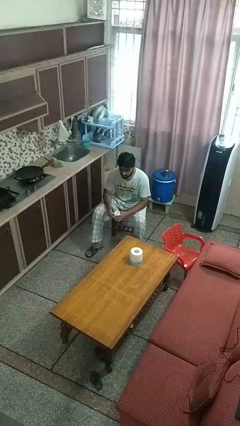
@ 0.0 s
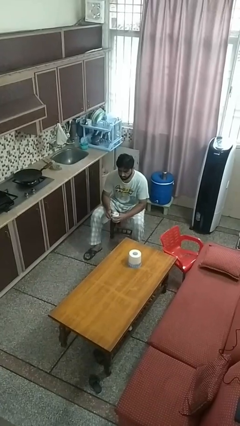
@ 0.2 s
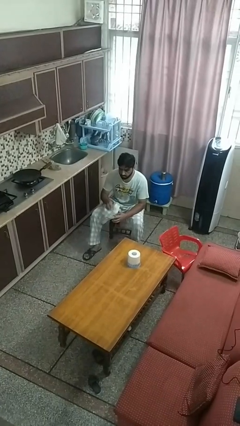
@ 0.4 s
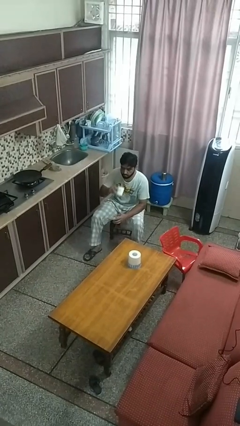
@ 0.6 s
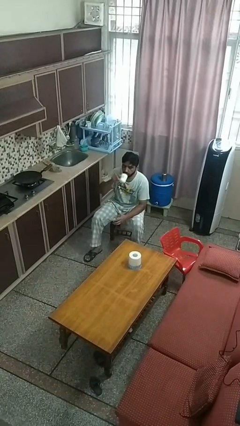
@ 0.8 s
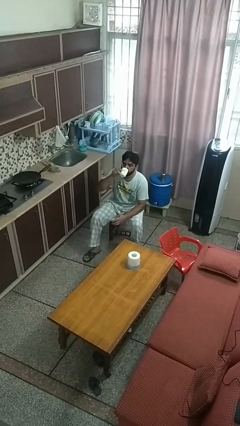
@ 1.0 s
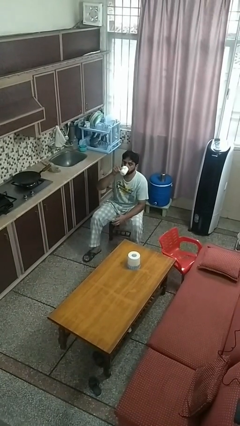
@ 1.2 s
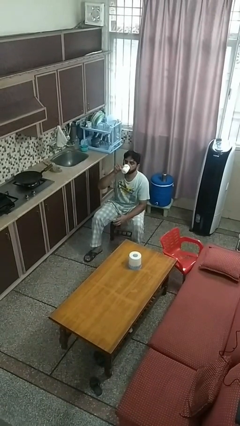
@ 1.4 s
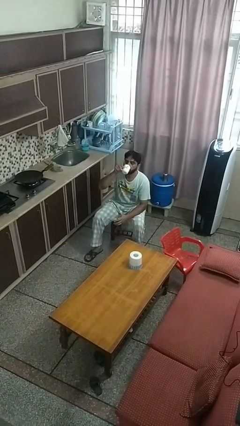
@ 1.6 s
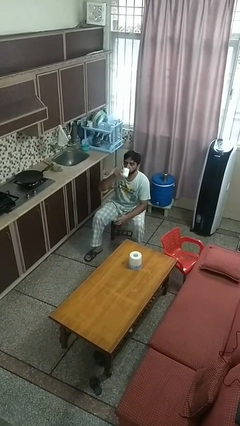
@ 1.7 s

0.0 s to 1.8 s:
person drinks from mug

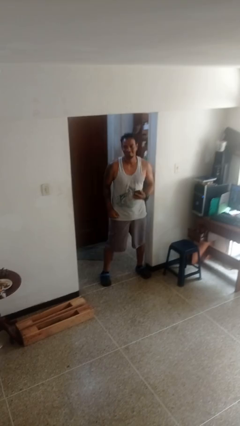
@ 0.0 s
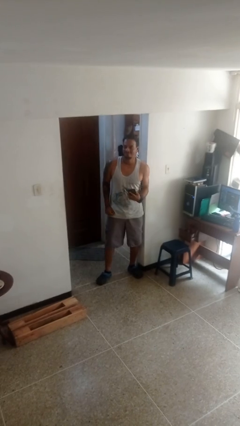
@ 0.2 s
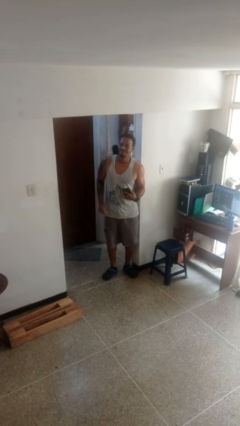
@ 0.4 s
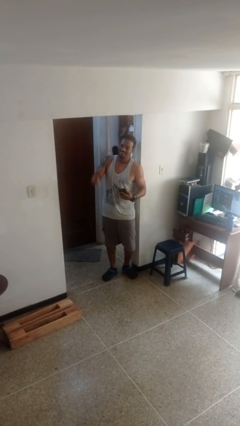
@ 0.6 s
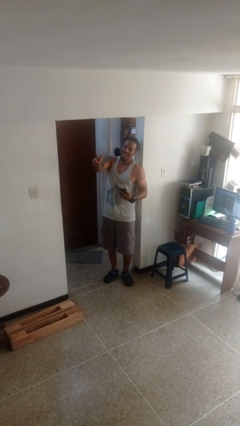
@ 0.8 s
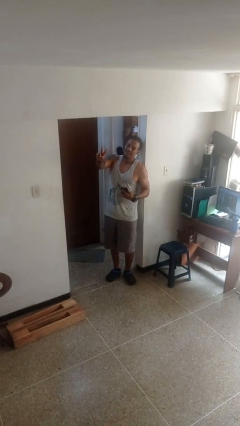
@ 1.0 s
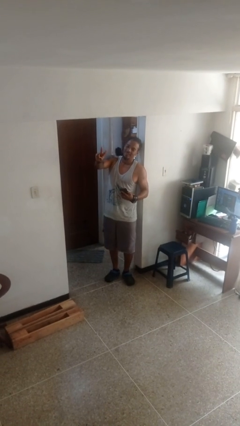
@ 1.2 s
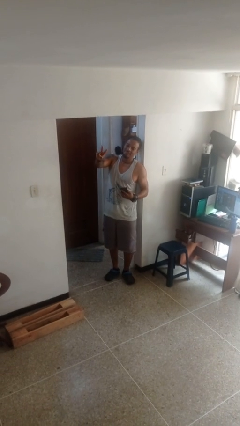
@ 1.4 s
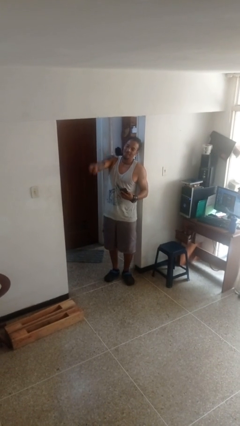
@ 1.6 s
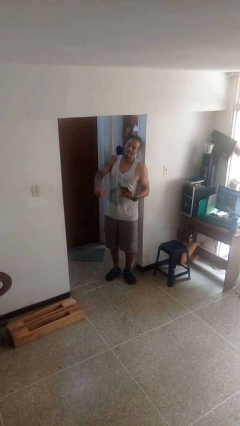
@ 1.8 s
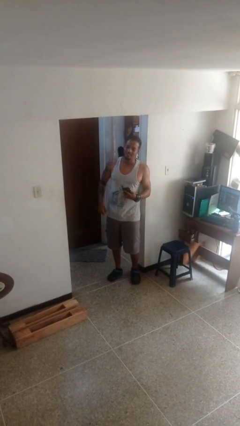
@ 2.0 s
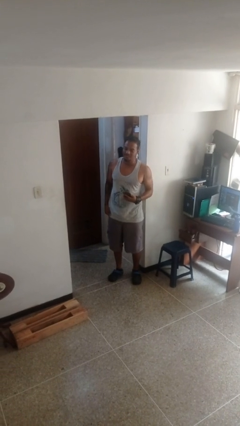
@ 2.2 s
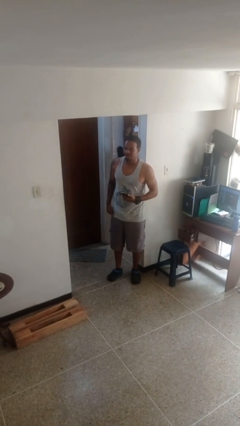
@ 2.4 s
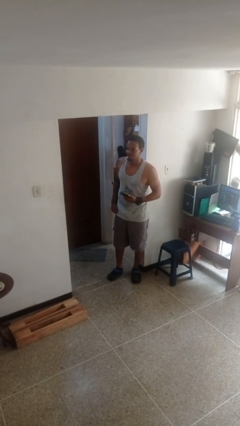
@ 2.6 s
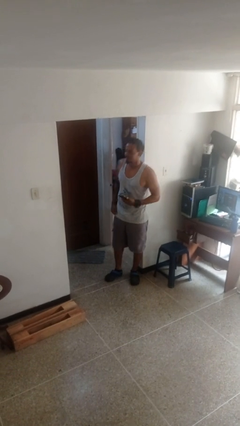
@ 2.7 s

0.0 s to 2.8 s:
person gestures peace

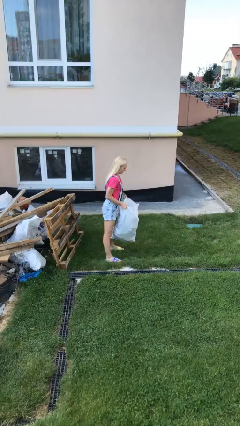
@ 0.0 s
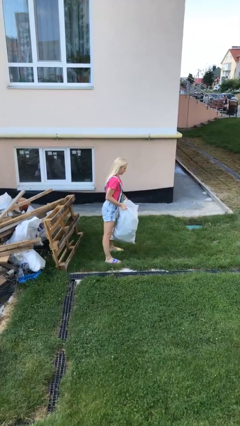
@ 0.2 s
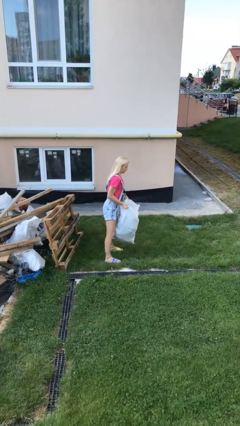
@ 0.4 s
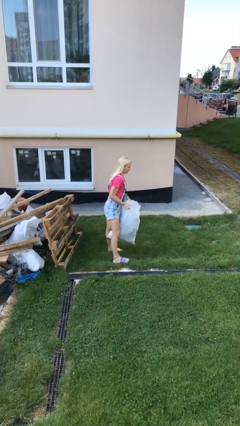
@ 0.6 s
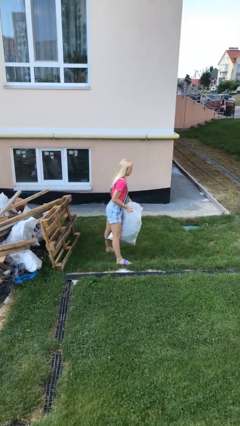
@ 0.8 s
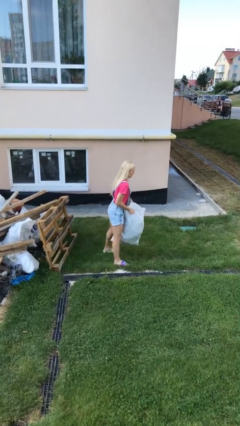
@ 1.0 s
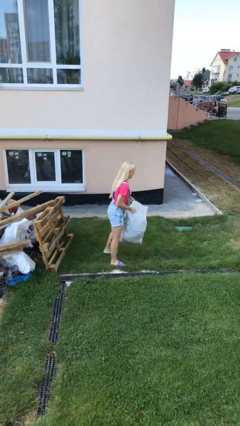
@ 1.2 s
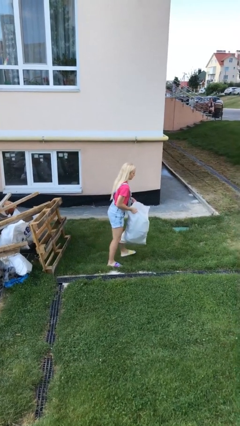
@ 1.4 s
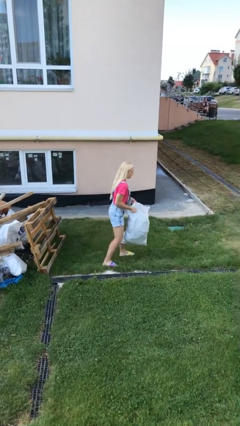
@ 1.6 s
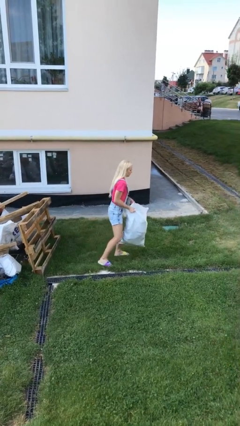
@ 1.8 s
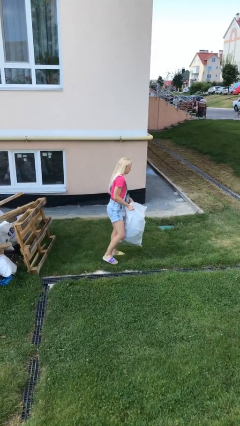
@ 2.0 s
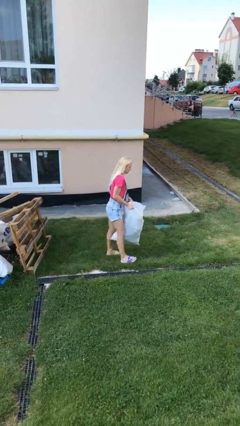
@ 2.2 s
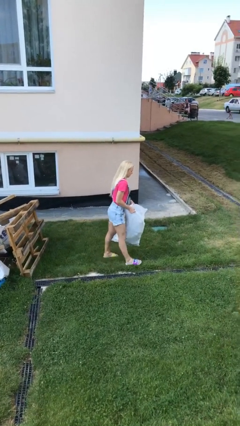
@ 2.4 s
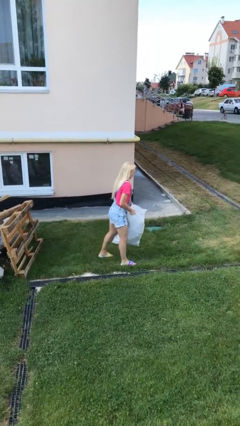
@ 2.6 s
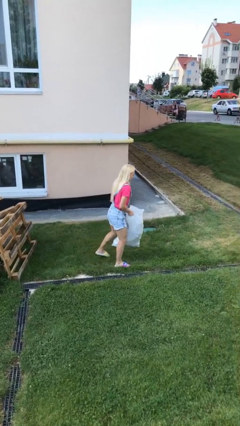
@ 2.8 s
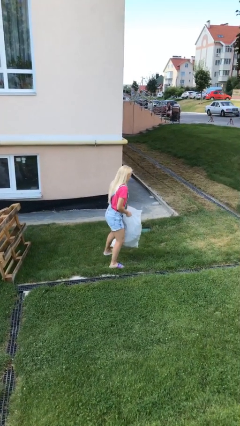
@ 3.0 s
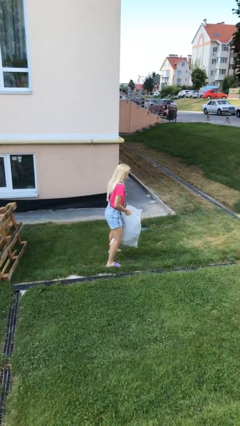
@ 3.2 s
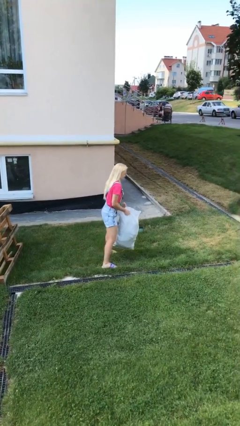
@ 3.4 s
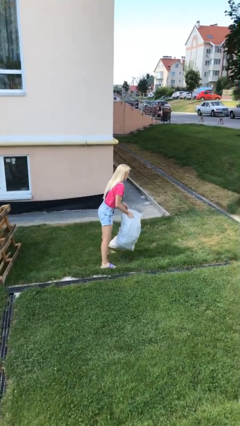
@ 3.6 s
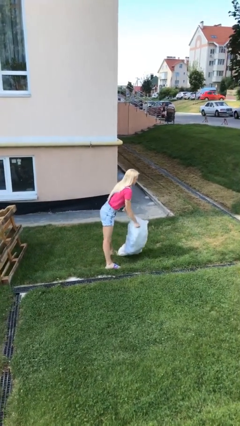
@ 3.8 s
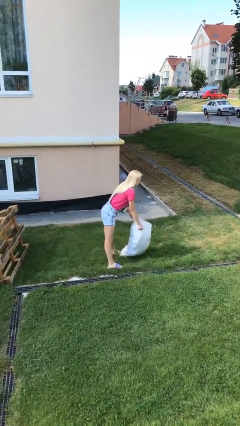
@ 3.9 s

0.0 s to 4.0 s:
person carries heavy object

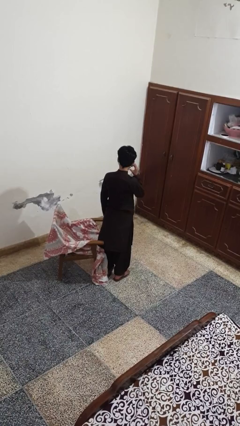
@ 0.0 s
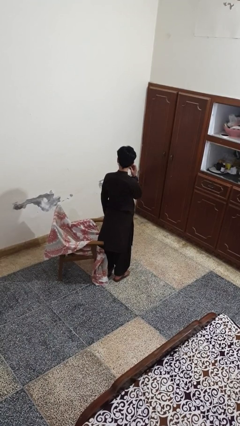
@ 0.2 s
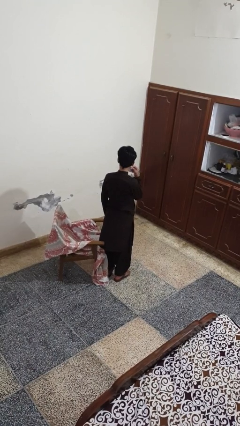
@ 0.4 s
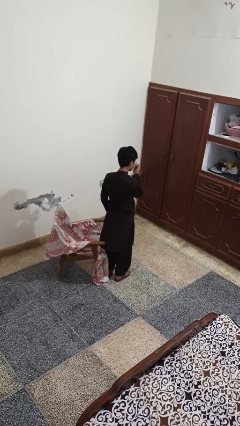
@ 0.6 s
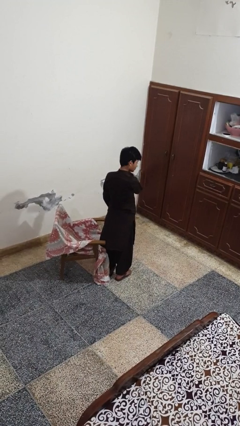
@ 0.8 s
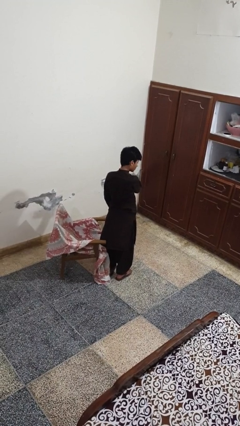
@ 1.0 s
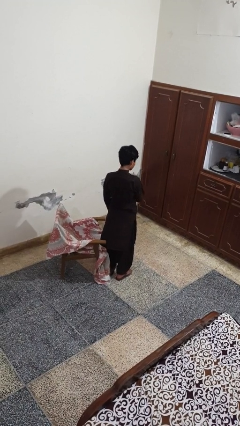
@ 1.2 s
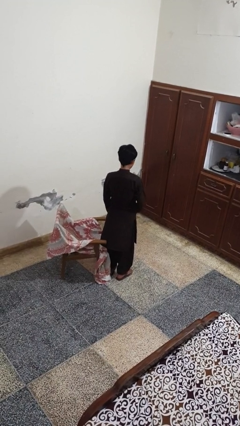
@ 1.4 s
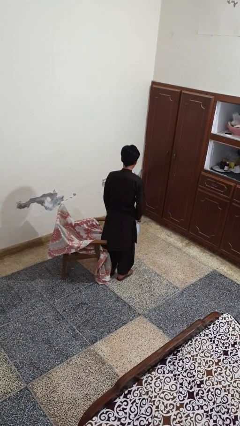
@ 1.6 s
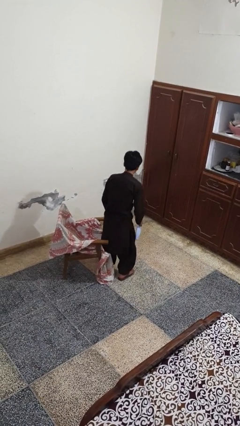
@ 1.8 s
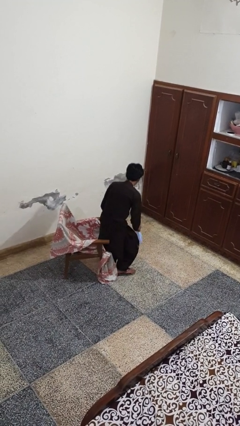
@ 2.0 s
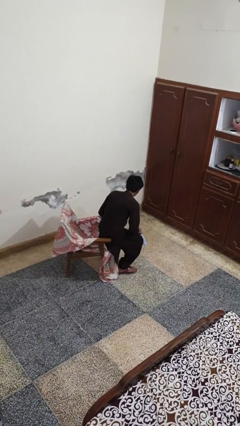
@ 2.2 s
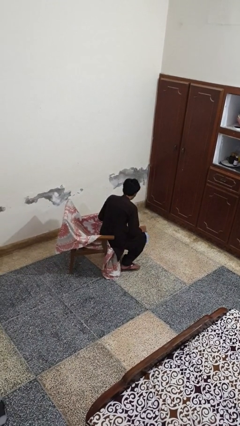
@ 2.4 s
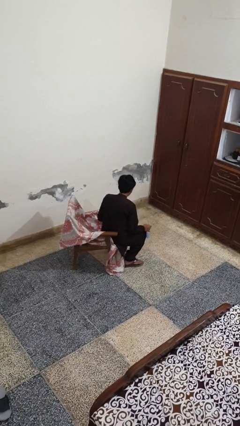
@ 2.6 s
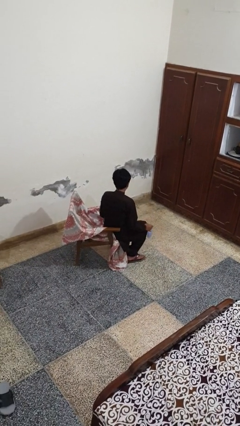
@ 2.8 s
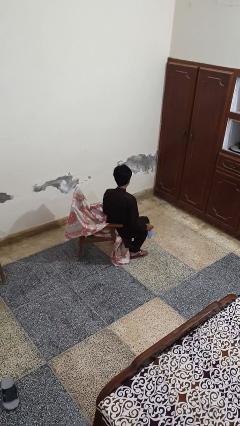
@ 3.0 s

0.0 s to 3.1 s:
person takes off facemask

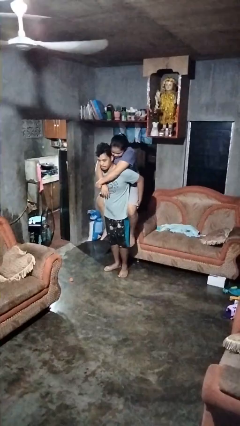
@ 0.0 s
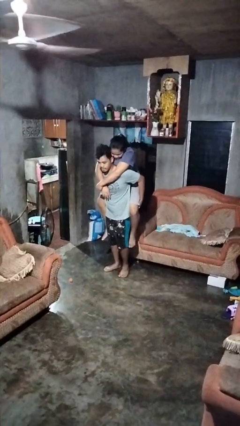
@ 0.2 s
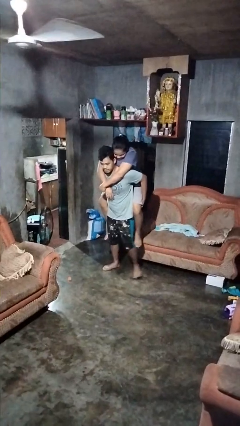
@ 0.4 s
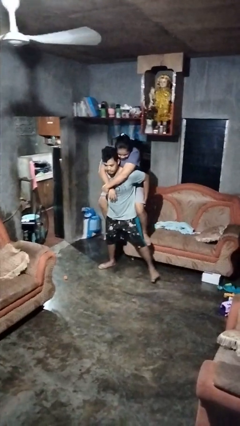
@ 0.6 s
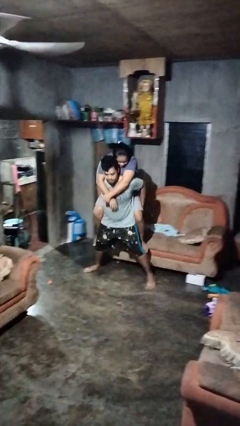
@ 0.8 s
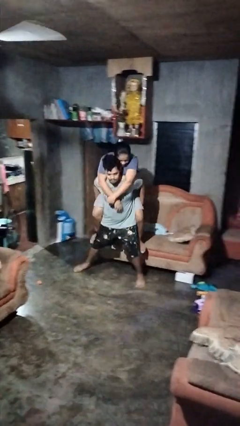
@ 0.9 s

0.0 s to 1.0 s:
person carries person on back

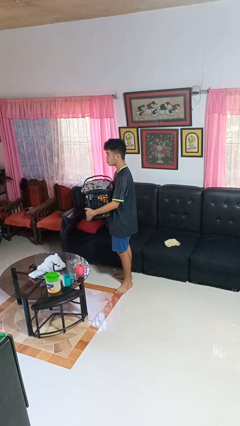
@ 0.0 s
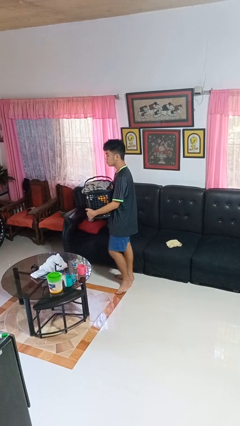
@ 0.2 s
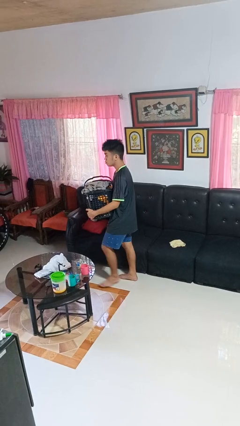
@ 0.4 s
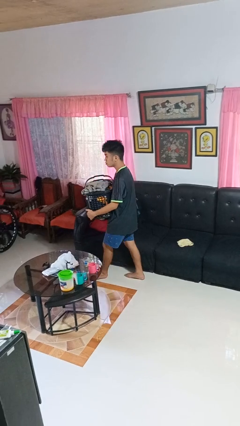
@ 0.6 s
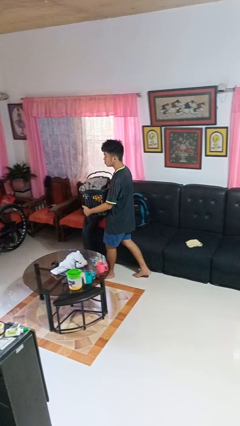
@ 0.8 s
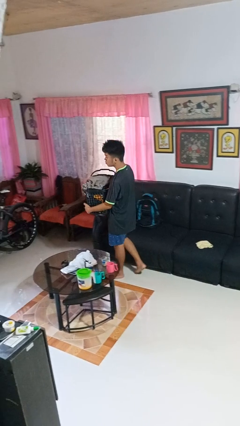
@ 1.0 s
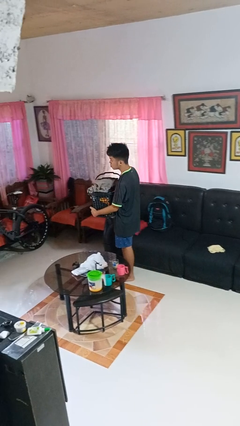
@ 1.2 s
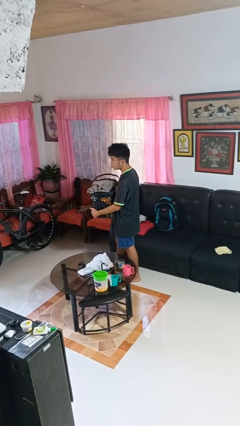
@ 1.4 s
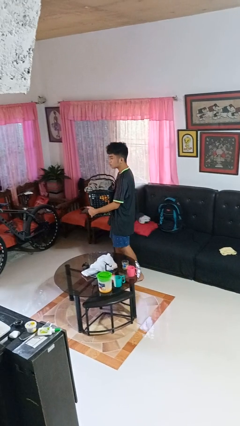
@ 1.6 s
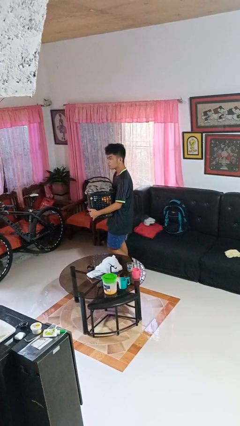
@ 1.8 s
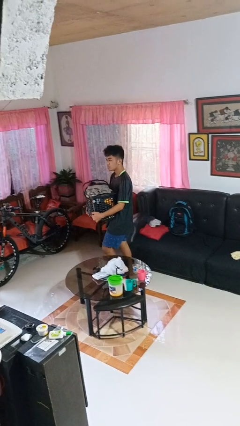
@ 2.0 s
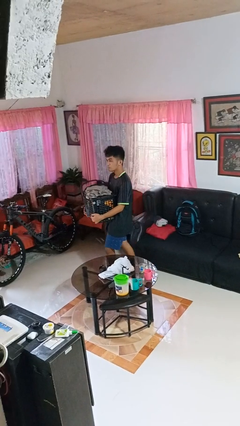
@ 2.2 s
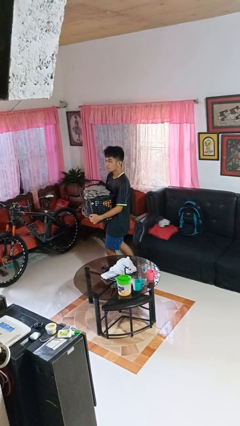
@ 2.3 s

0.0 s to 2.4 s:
person carries laundry basket

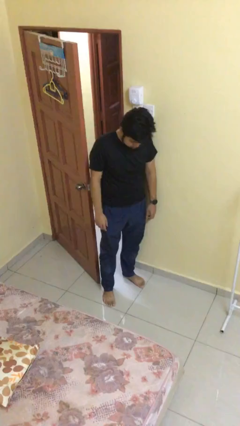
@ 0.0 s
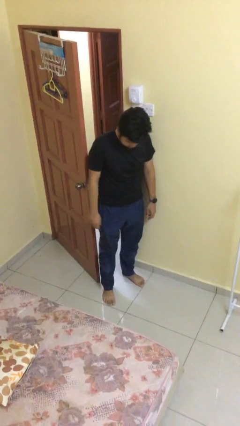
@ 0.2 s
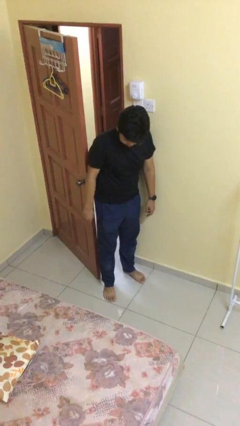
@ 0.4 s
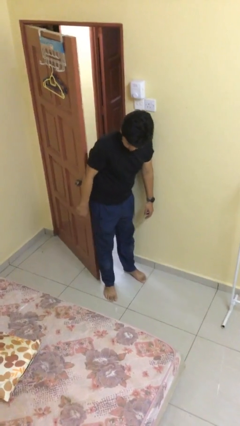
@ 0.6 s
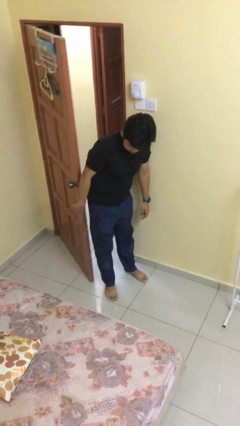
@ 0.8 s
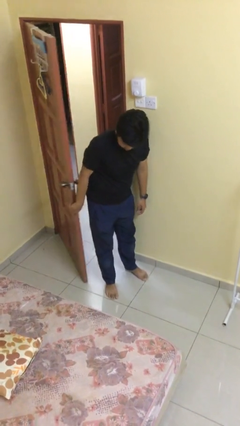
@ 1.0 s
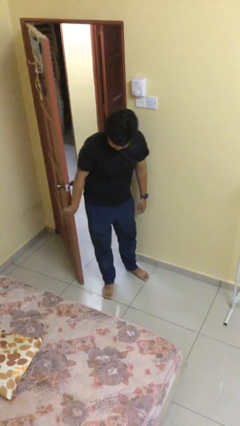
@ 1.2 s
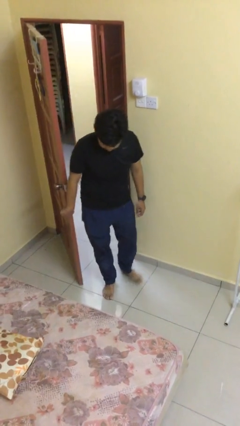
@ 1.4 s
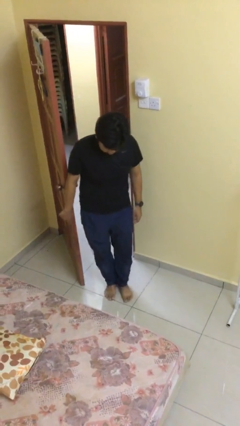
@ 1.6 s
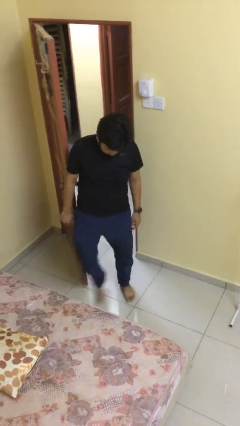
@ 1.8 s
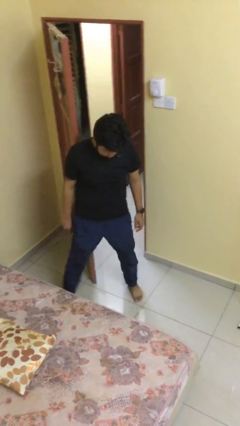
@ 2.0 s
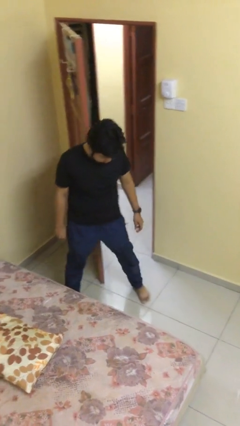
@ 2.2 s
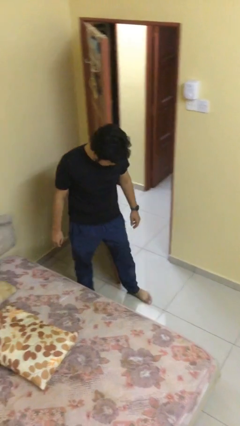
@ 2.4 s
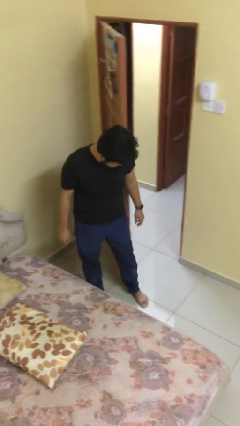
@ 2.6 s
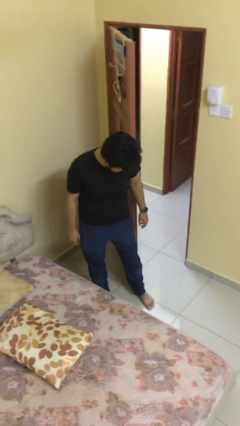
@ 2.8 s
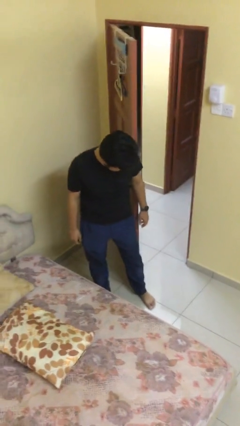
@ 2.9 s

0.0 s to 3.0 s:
person opens facility door
